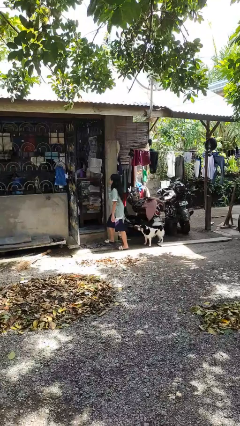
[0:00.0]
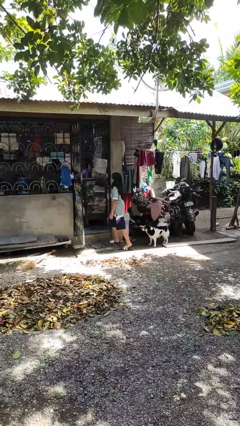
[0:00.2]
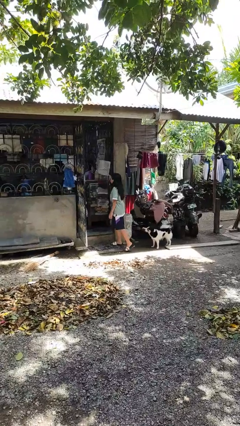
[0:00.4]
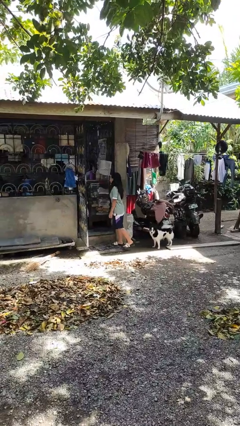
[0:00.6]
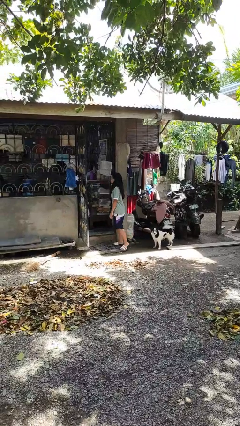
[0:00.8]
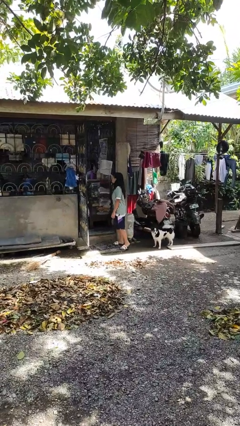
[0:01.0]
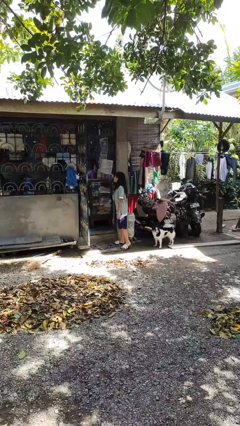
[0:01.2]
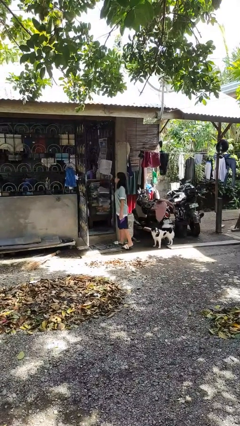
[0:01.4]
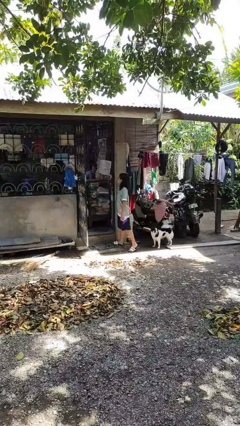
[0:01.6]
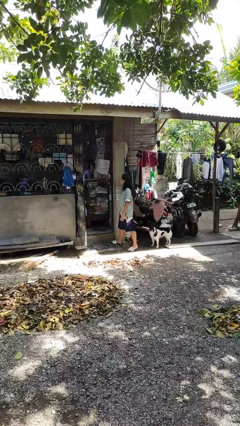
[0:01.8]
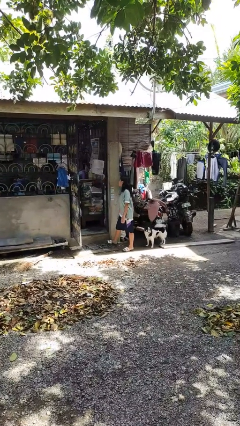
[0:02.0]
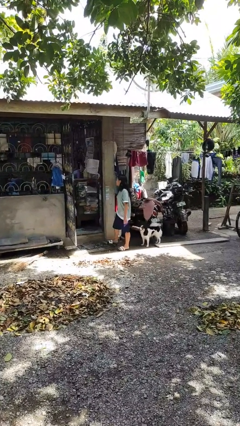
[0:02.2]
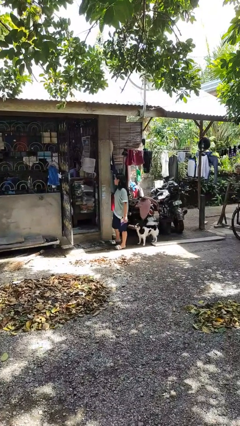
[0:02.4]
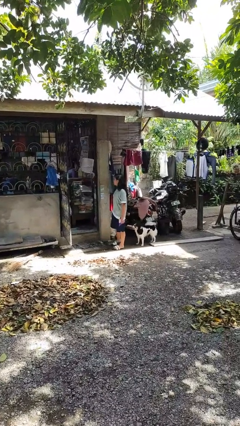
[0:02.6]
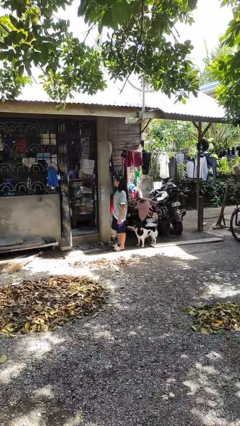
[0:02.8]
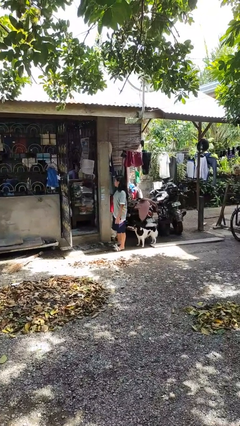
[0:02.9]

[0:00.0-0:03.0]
person bumps into wall

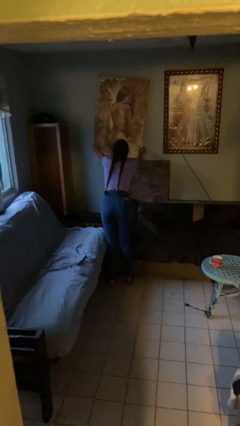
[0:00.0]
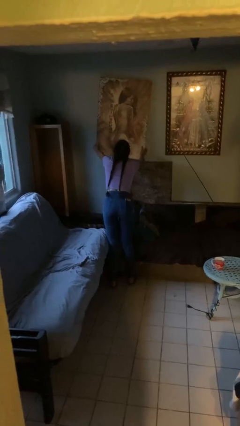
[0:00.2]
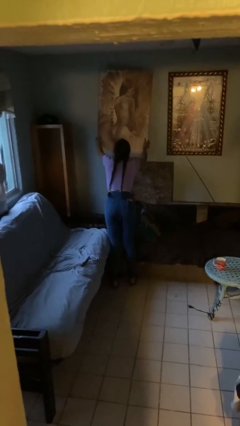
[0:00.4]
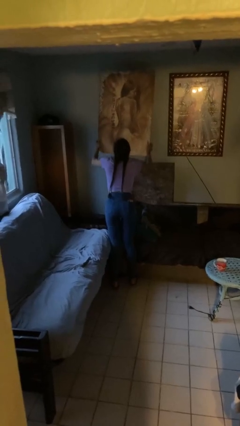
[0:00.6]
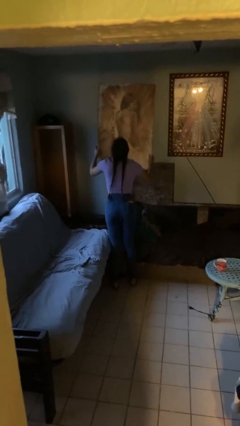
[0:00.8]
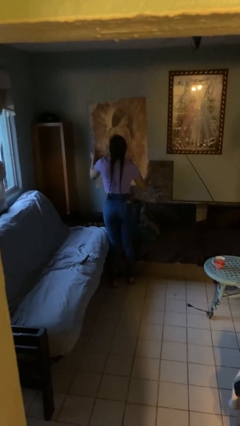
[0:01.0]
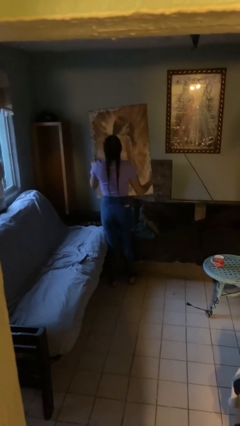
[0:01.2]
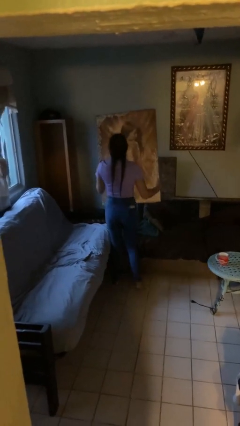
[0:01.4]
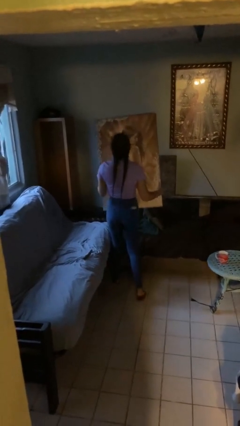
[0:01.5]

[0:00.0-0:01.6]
person takes down picture frame

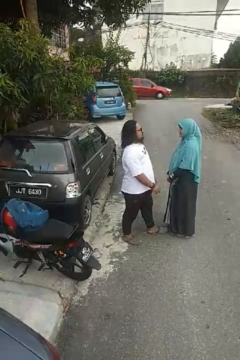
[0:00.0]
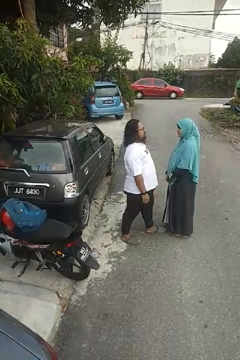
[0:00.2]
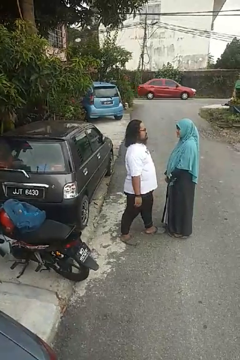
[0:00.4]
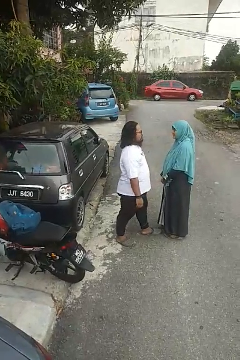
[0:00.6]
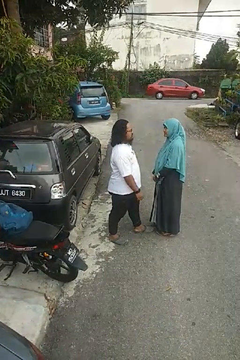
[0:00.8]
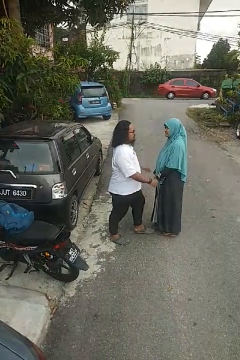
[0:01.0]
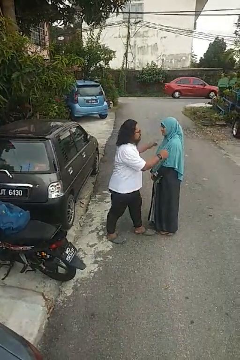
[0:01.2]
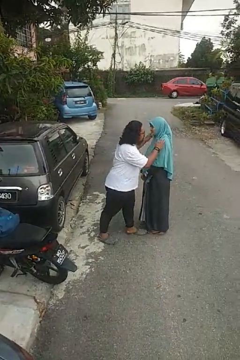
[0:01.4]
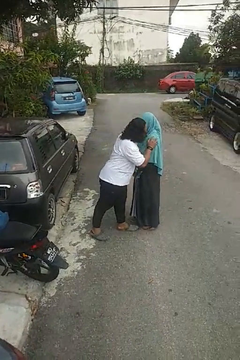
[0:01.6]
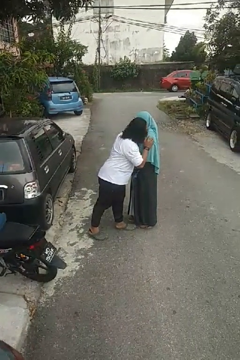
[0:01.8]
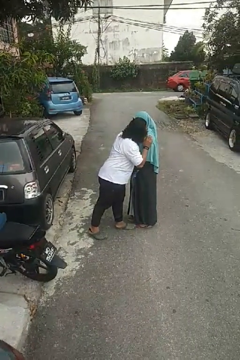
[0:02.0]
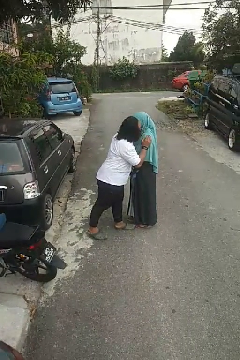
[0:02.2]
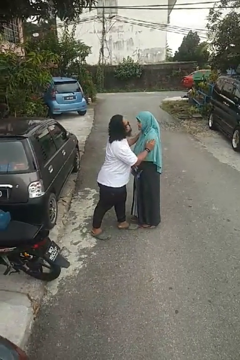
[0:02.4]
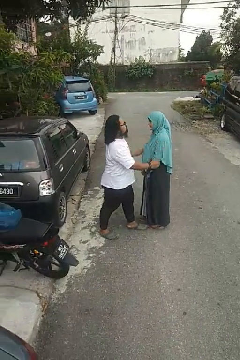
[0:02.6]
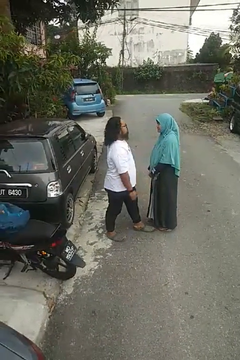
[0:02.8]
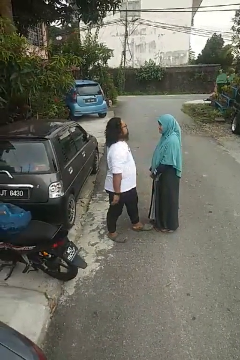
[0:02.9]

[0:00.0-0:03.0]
person kisses cheek of person

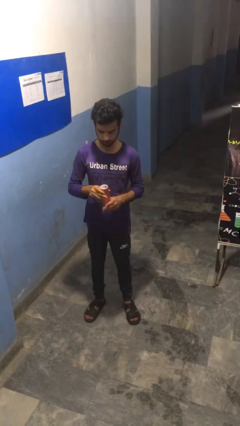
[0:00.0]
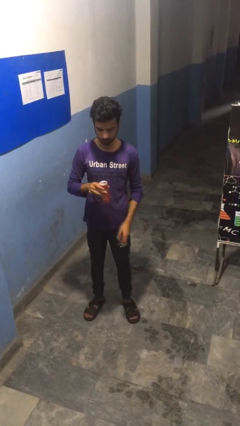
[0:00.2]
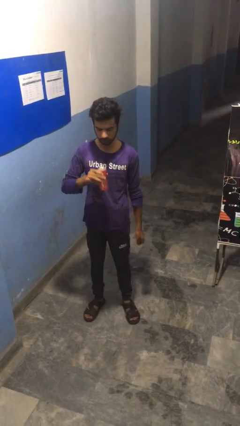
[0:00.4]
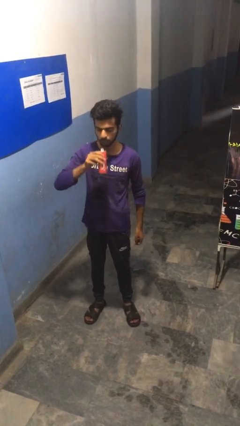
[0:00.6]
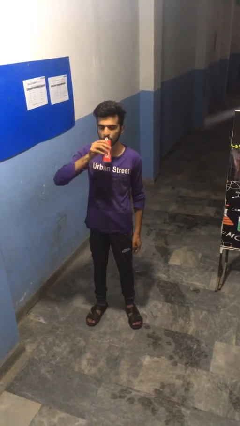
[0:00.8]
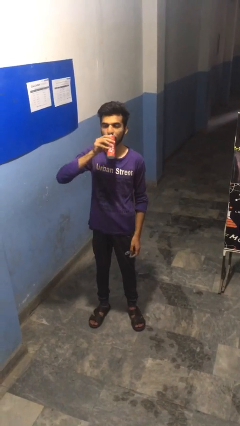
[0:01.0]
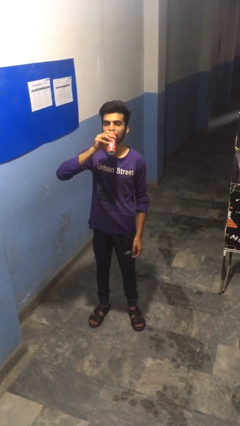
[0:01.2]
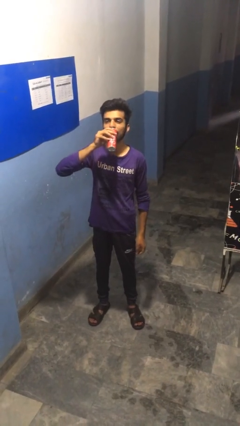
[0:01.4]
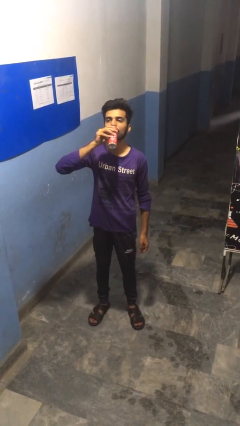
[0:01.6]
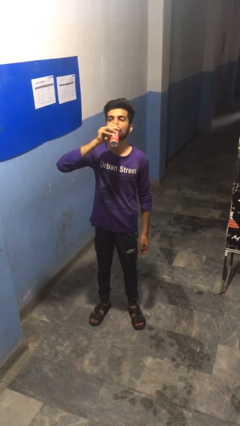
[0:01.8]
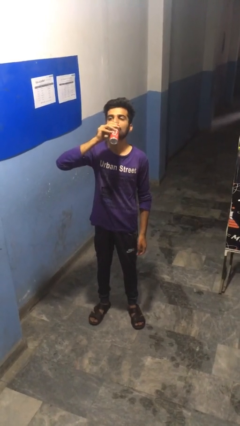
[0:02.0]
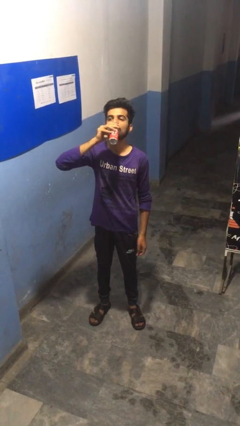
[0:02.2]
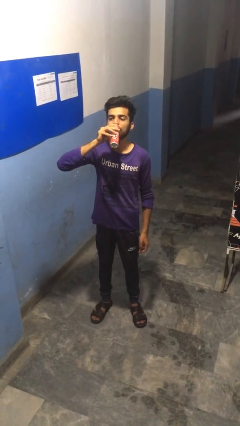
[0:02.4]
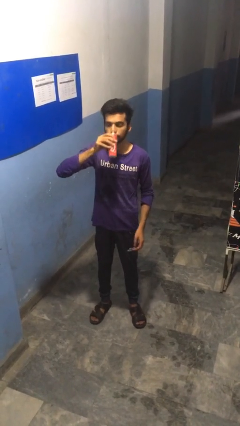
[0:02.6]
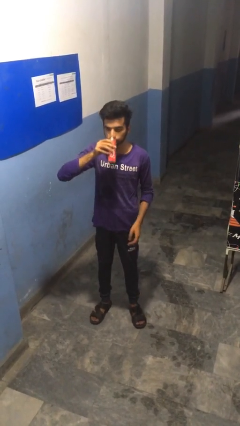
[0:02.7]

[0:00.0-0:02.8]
person drinks from beverage can

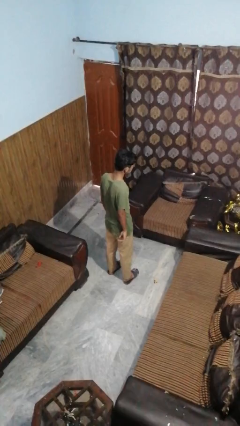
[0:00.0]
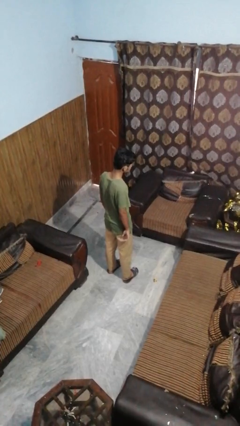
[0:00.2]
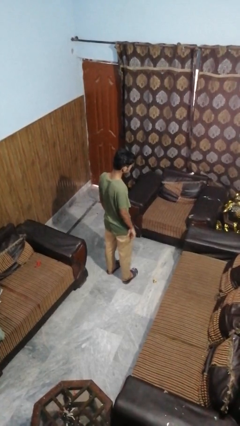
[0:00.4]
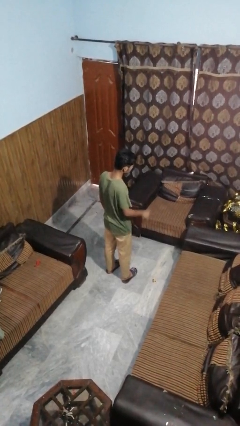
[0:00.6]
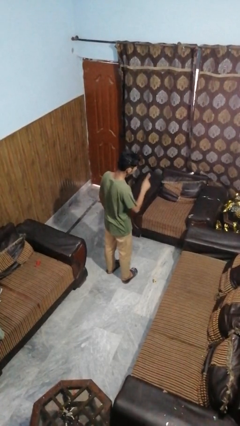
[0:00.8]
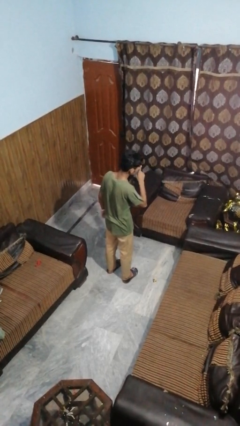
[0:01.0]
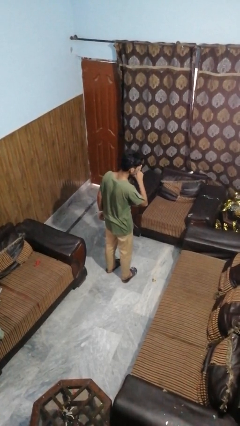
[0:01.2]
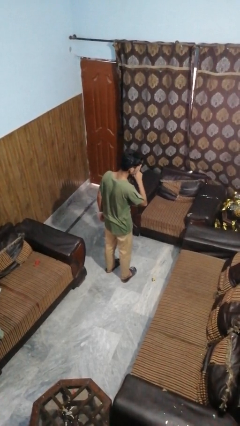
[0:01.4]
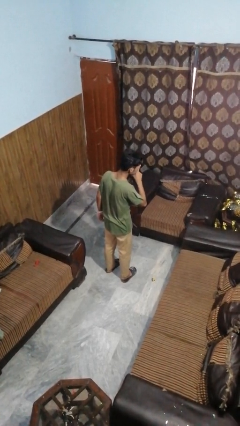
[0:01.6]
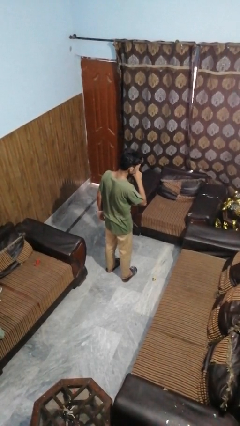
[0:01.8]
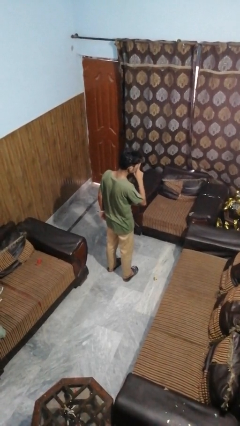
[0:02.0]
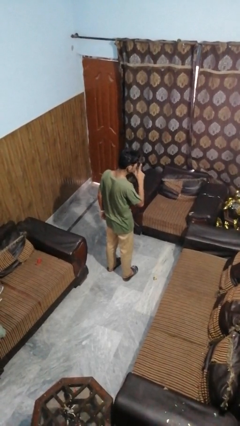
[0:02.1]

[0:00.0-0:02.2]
person gestures be quiet

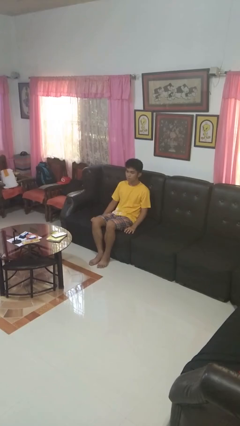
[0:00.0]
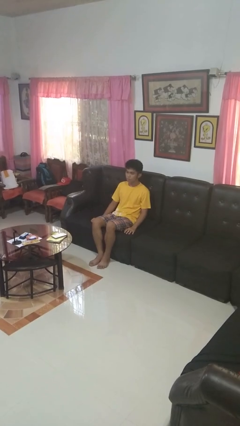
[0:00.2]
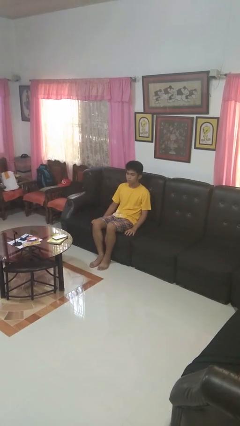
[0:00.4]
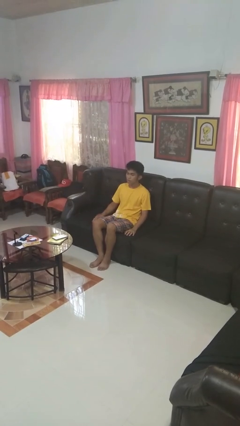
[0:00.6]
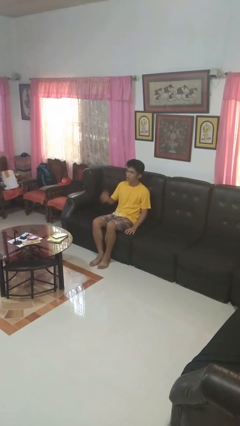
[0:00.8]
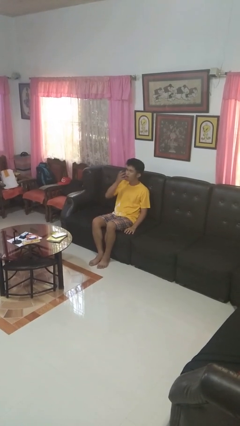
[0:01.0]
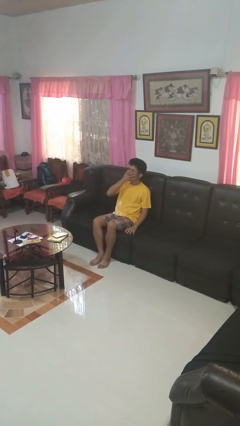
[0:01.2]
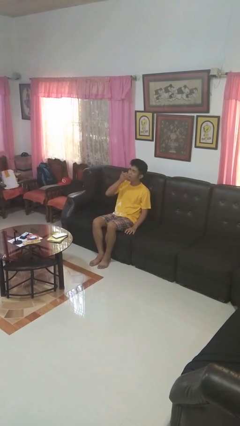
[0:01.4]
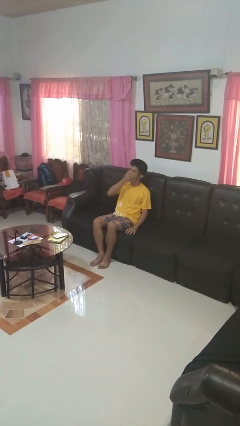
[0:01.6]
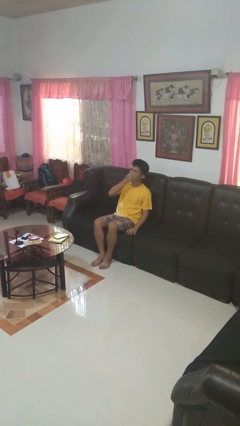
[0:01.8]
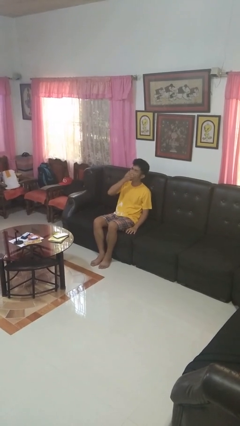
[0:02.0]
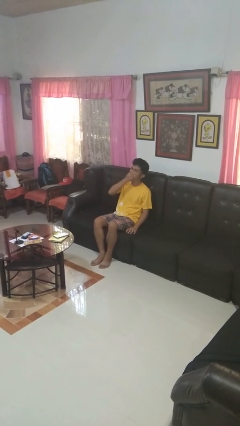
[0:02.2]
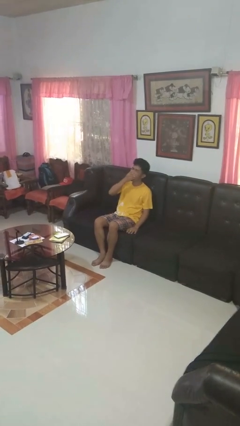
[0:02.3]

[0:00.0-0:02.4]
person yawns

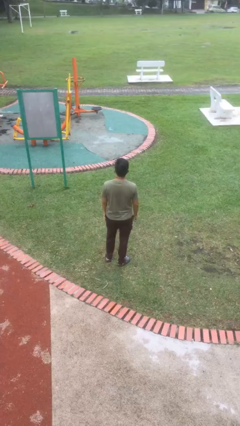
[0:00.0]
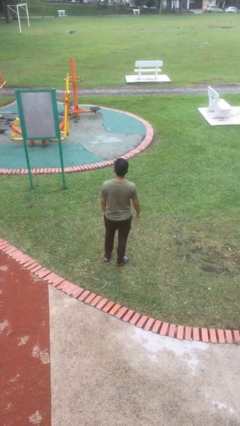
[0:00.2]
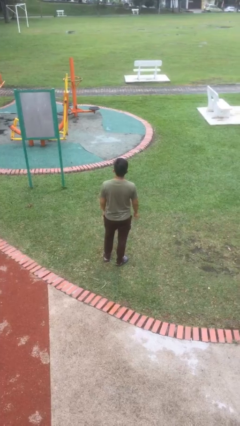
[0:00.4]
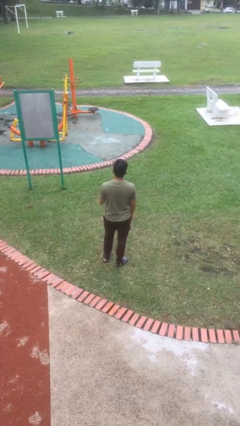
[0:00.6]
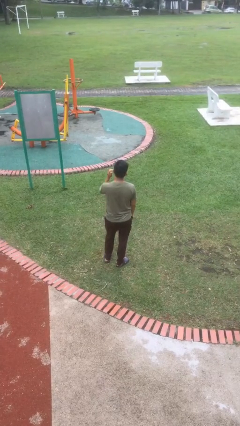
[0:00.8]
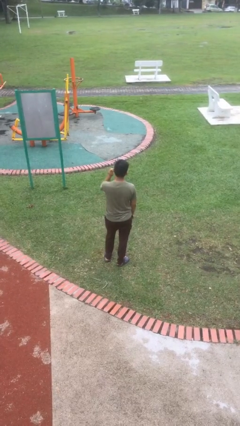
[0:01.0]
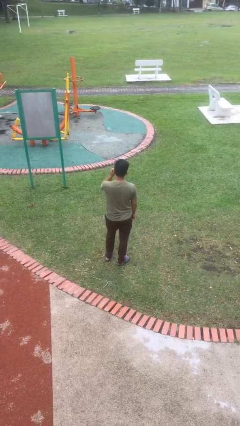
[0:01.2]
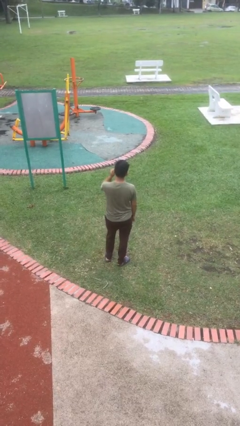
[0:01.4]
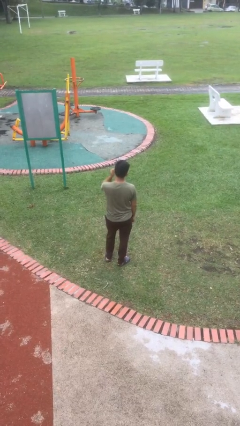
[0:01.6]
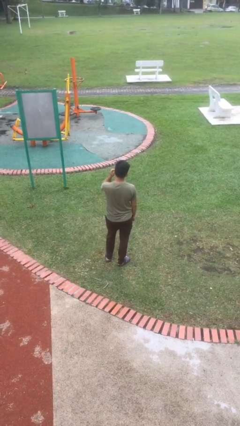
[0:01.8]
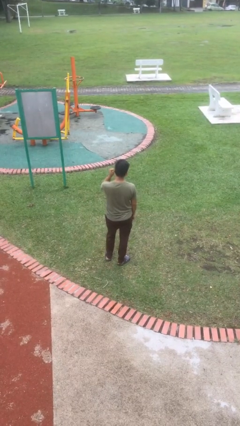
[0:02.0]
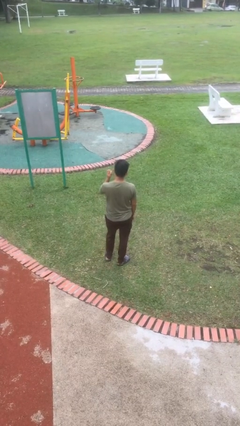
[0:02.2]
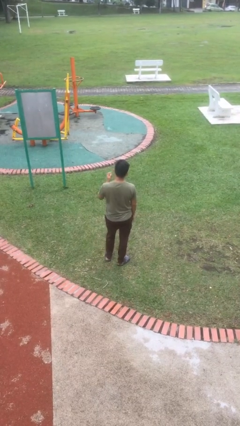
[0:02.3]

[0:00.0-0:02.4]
person touches earlobe
